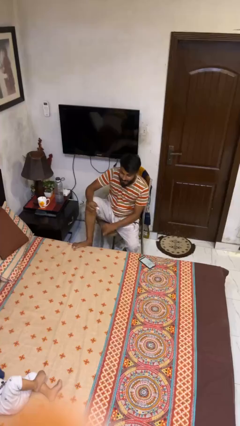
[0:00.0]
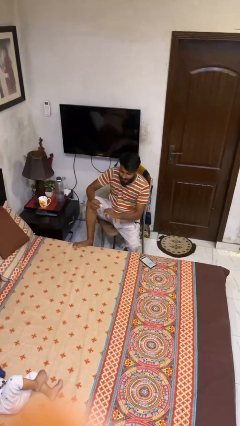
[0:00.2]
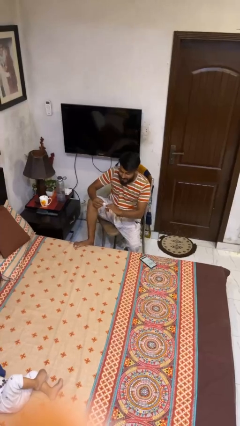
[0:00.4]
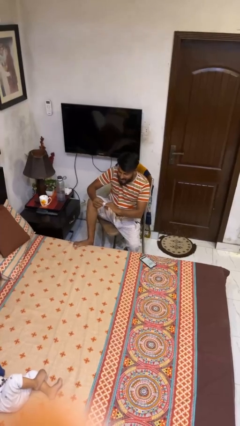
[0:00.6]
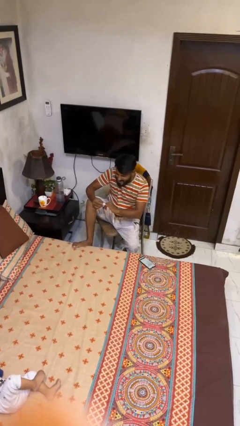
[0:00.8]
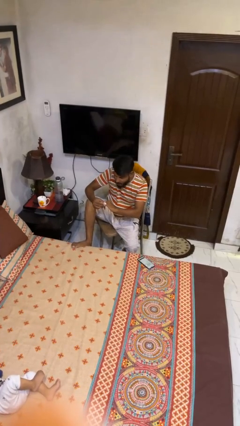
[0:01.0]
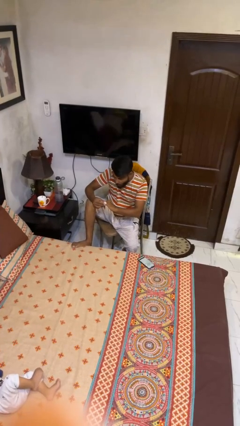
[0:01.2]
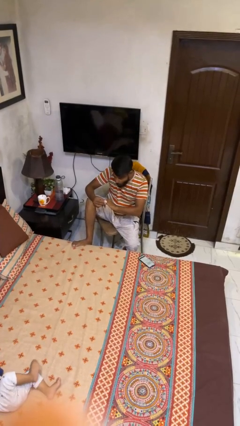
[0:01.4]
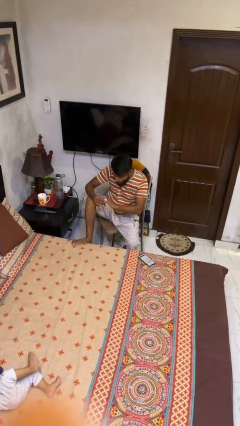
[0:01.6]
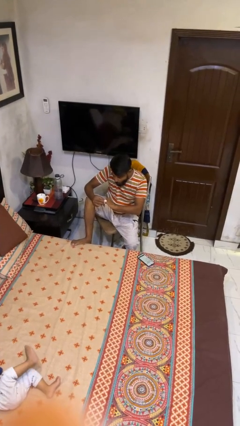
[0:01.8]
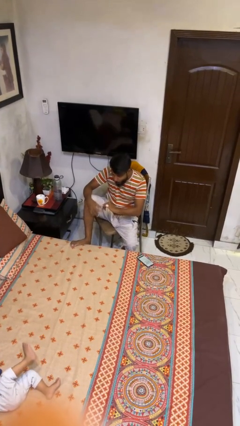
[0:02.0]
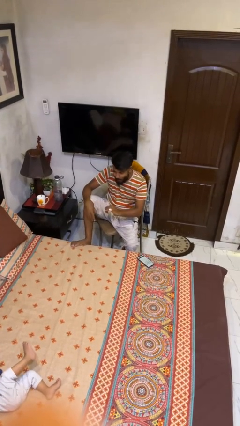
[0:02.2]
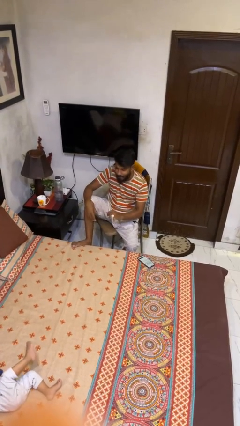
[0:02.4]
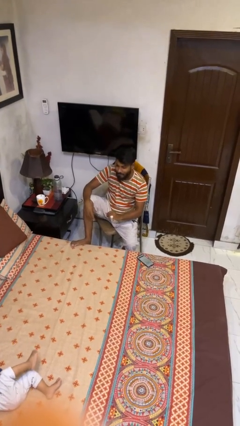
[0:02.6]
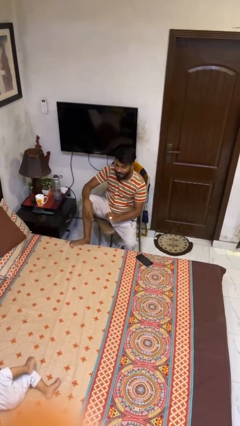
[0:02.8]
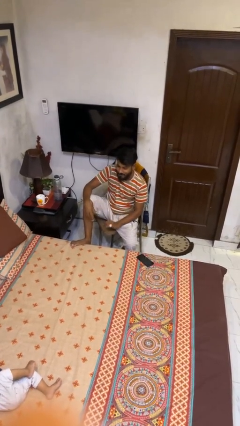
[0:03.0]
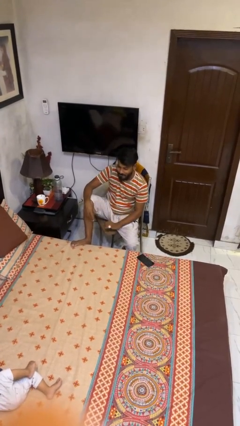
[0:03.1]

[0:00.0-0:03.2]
person puts on ring

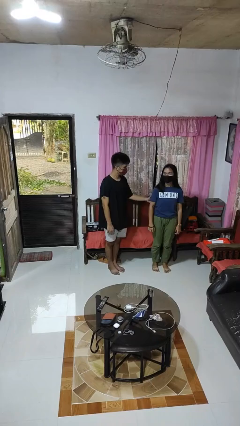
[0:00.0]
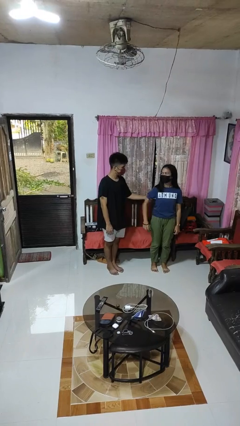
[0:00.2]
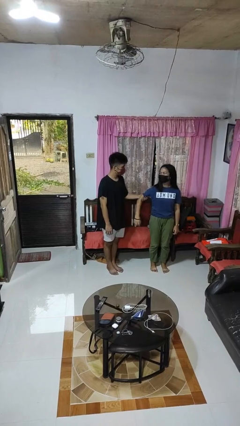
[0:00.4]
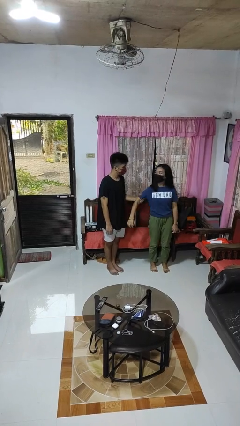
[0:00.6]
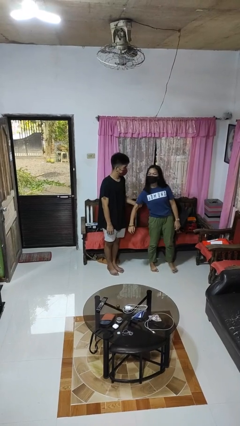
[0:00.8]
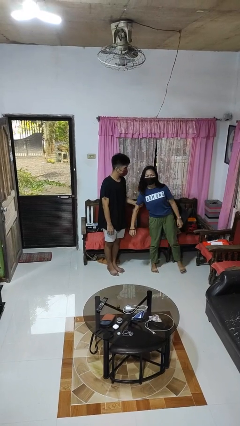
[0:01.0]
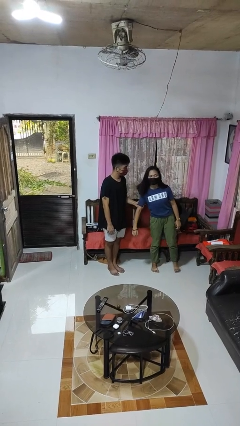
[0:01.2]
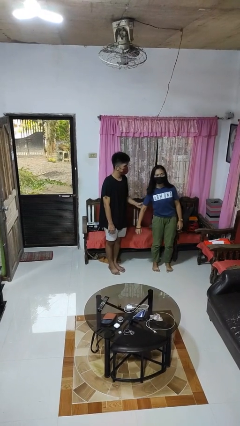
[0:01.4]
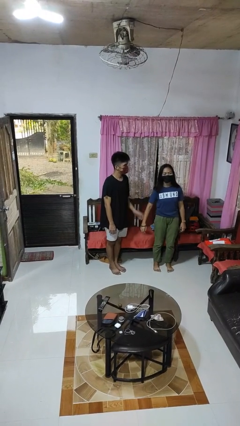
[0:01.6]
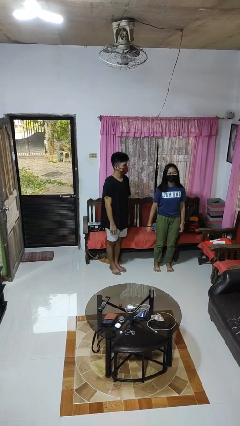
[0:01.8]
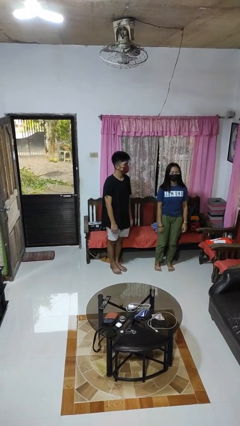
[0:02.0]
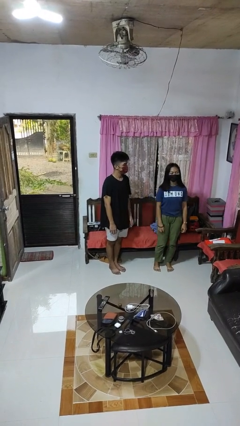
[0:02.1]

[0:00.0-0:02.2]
person grabs person by bicep

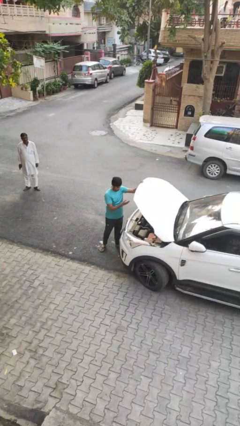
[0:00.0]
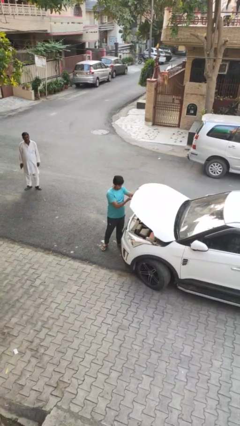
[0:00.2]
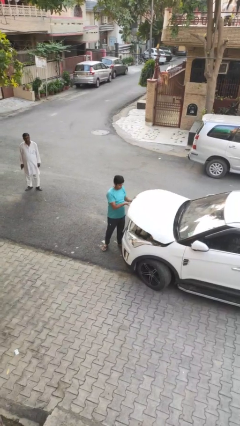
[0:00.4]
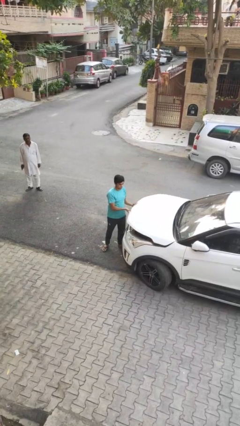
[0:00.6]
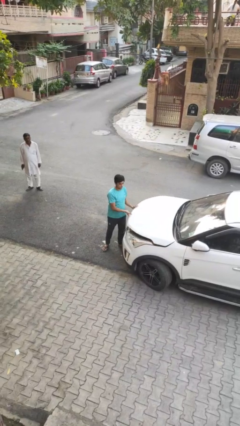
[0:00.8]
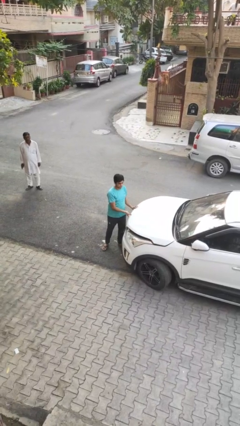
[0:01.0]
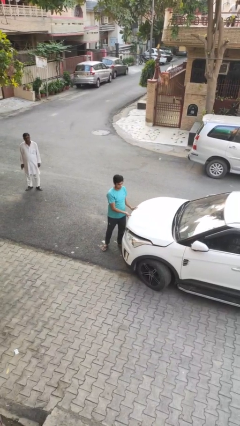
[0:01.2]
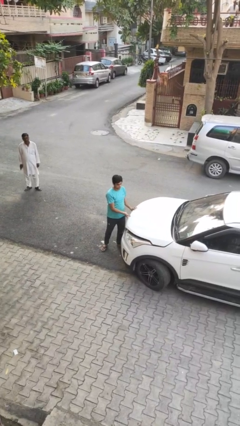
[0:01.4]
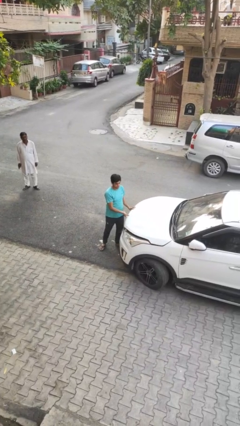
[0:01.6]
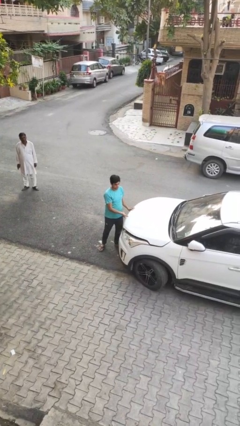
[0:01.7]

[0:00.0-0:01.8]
person closes car hood

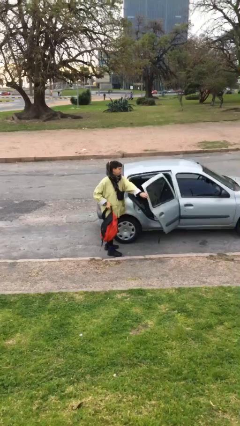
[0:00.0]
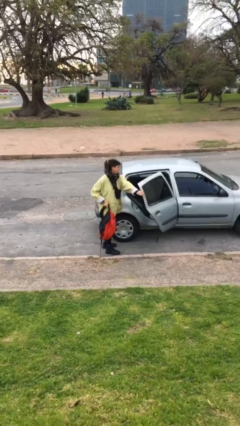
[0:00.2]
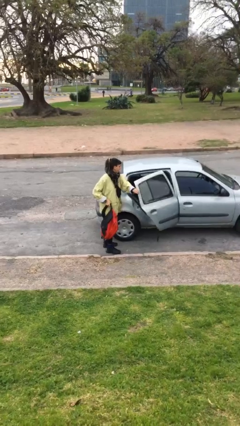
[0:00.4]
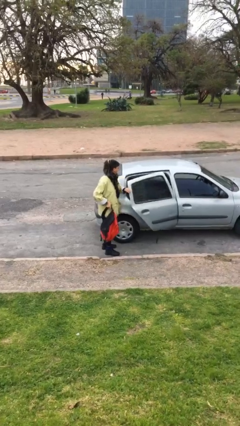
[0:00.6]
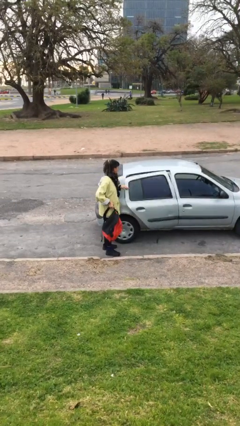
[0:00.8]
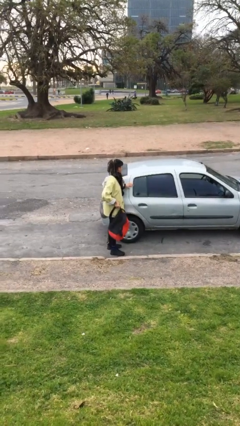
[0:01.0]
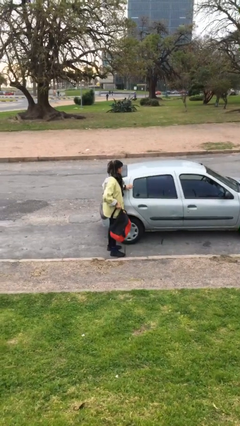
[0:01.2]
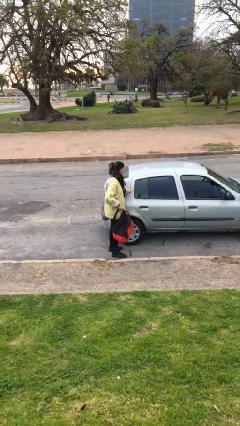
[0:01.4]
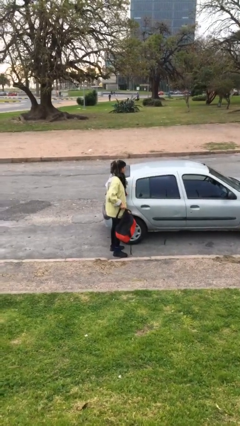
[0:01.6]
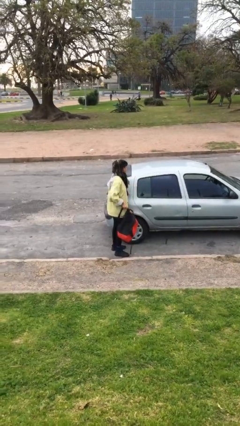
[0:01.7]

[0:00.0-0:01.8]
person closes car door

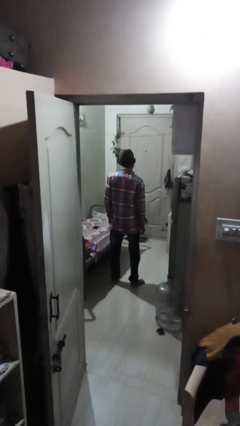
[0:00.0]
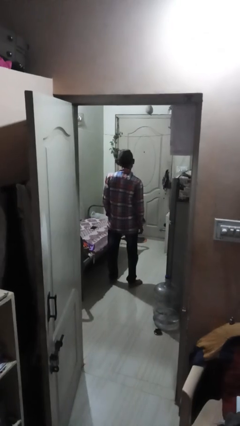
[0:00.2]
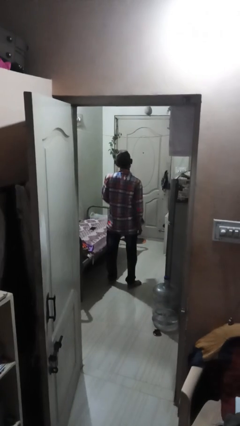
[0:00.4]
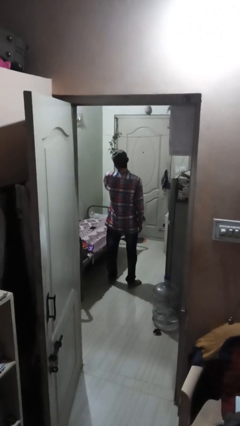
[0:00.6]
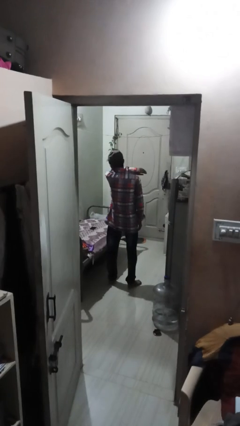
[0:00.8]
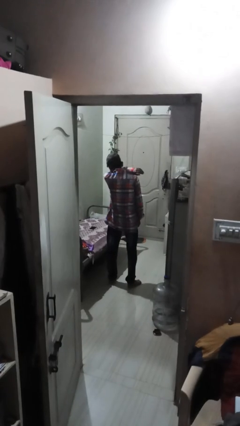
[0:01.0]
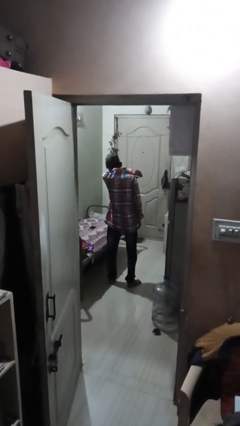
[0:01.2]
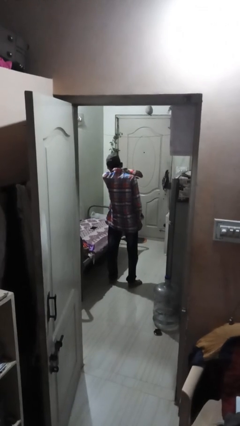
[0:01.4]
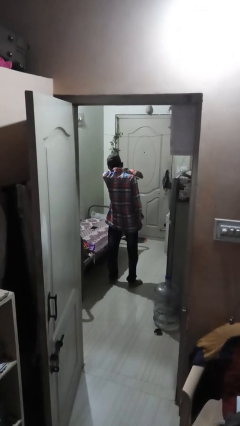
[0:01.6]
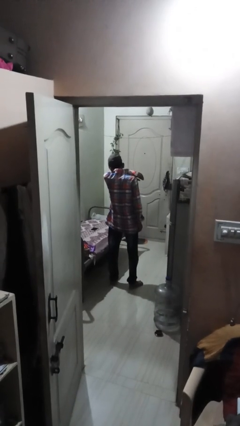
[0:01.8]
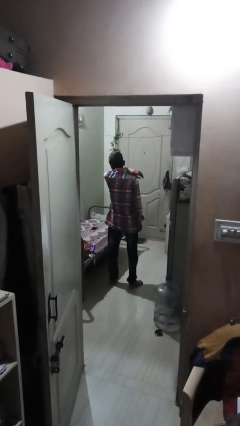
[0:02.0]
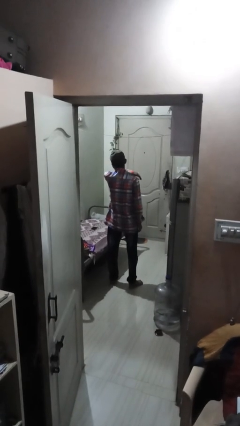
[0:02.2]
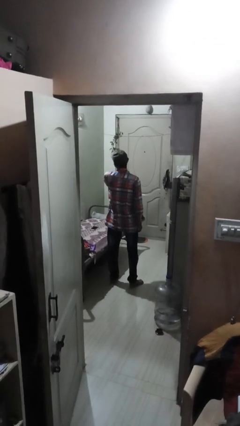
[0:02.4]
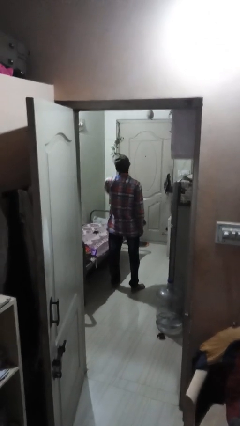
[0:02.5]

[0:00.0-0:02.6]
person sneezes into arm

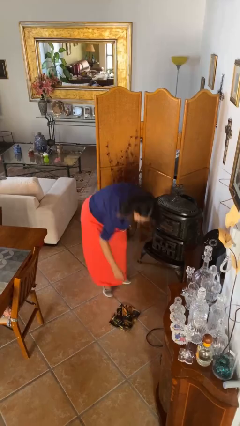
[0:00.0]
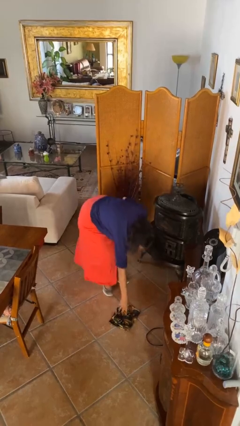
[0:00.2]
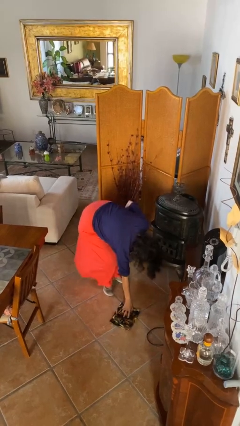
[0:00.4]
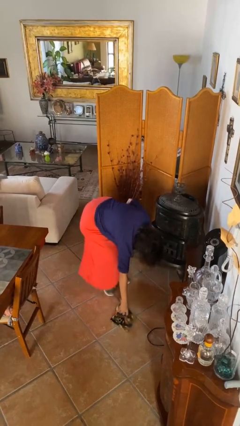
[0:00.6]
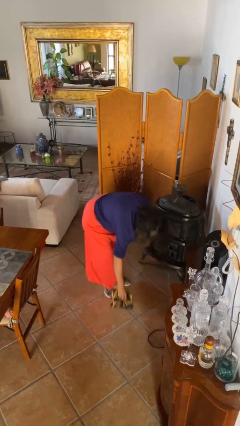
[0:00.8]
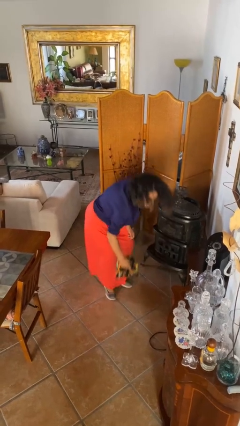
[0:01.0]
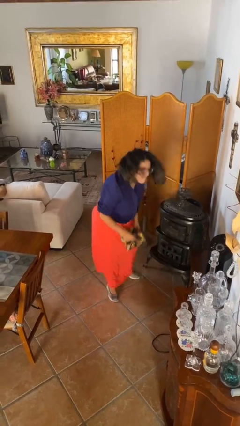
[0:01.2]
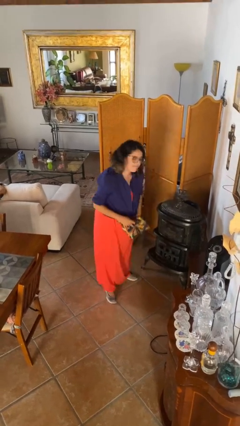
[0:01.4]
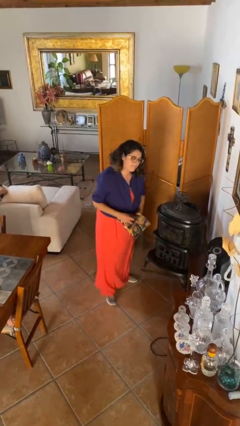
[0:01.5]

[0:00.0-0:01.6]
person picks up object from floor

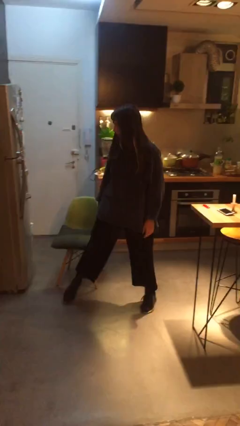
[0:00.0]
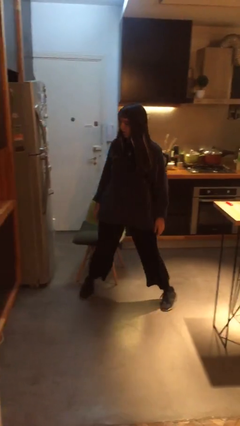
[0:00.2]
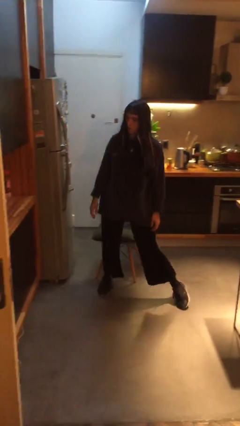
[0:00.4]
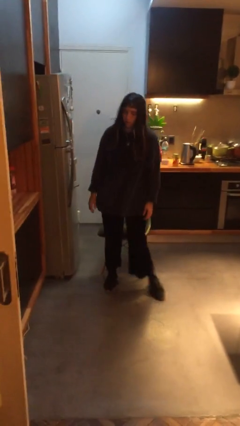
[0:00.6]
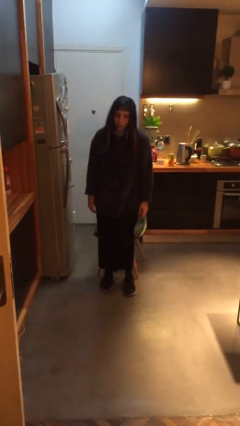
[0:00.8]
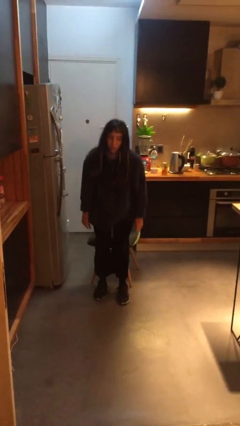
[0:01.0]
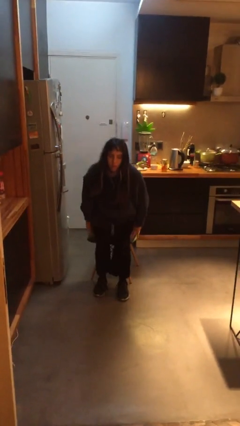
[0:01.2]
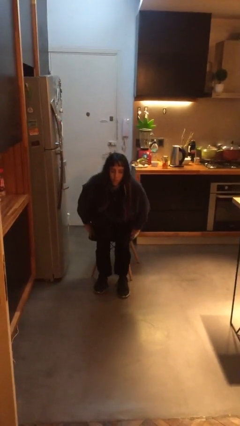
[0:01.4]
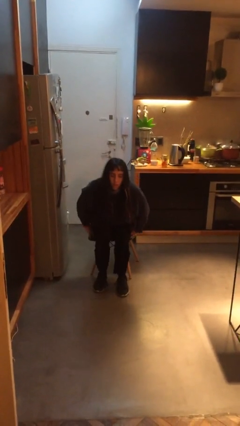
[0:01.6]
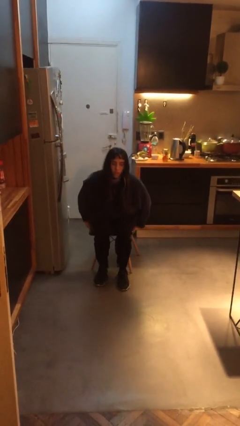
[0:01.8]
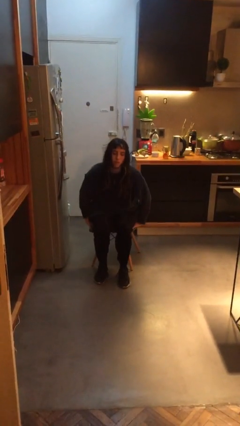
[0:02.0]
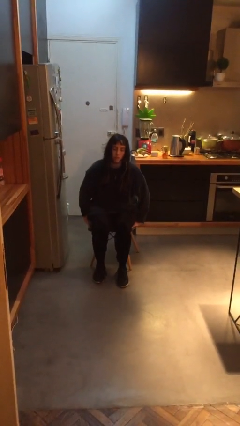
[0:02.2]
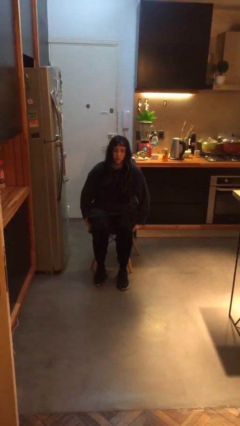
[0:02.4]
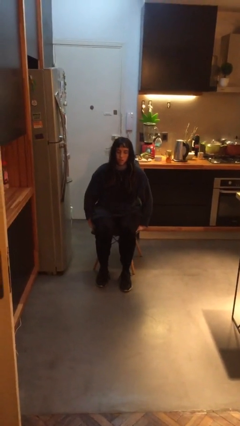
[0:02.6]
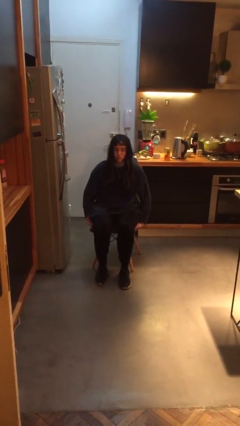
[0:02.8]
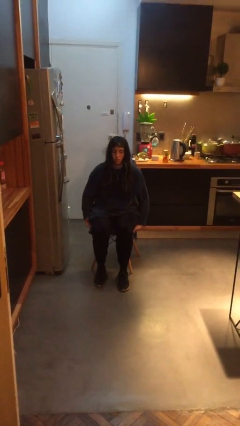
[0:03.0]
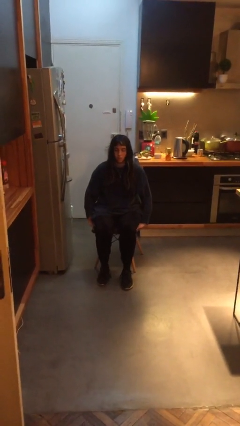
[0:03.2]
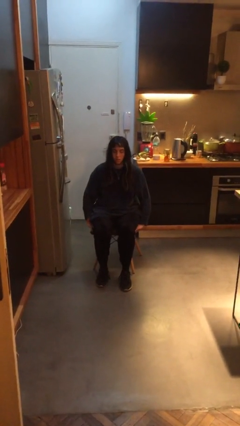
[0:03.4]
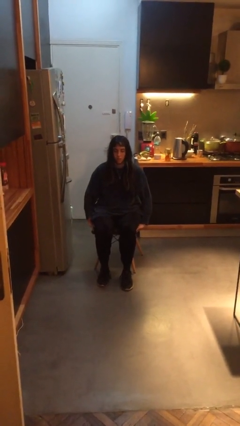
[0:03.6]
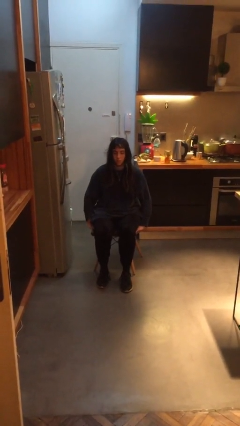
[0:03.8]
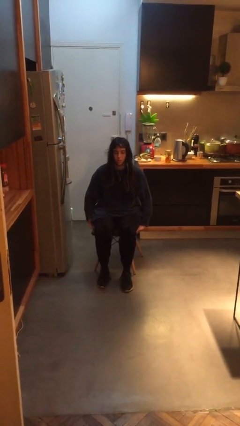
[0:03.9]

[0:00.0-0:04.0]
person sits down
